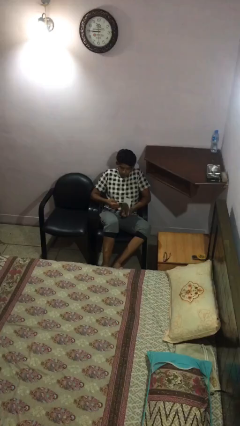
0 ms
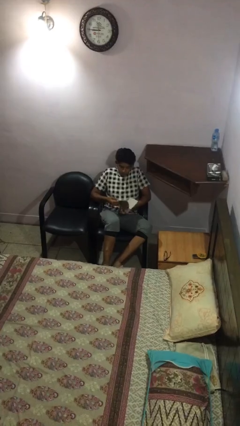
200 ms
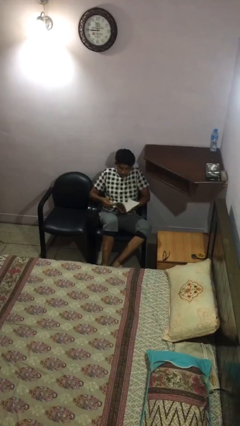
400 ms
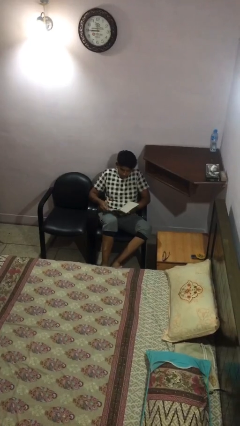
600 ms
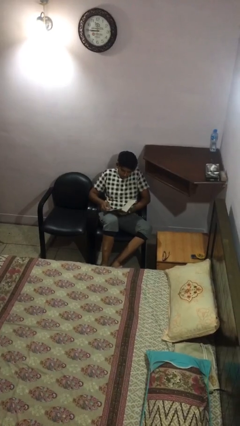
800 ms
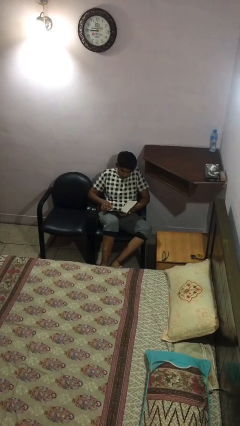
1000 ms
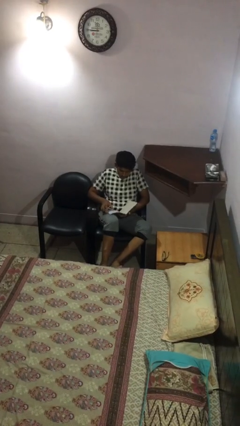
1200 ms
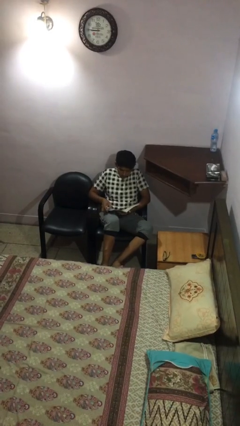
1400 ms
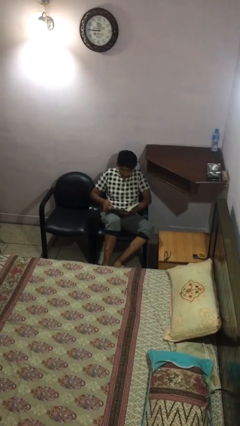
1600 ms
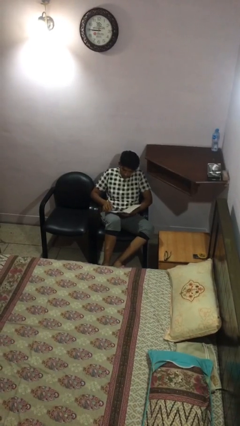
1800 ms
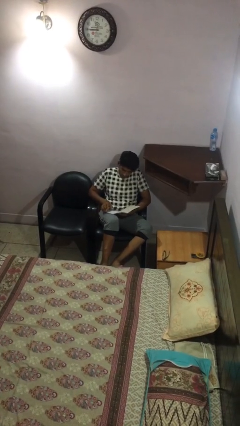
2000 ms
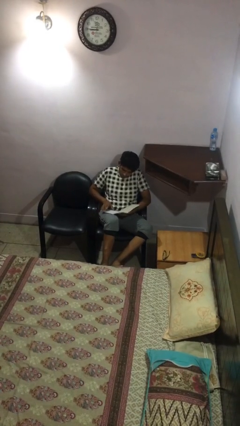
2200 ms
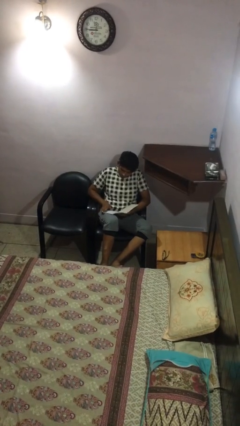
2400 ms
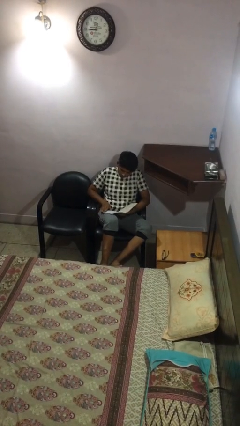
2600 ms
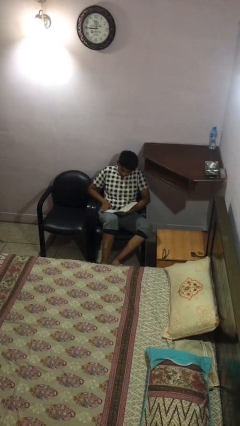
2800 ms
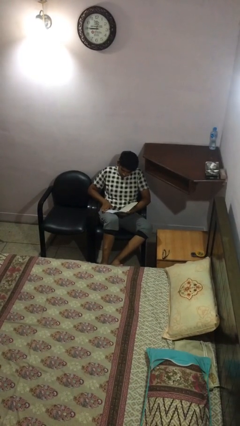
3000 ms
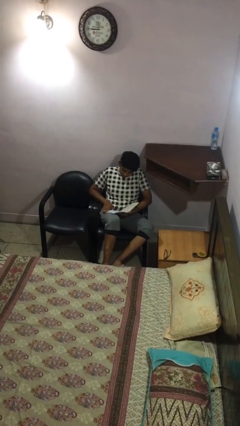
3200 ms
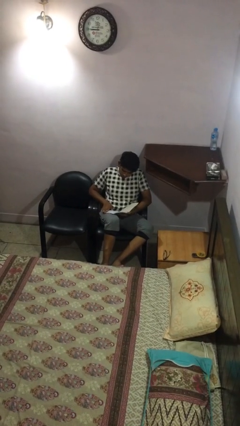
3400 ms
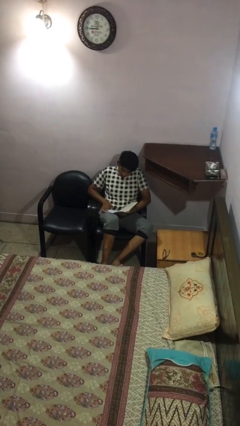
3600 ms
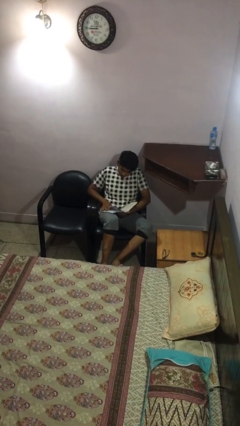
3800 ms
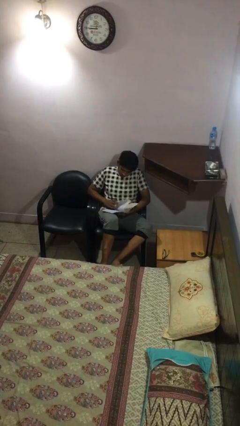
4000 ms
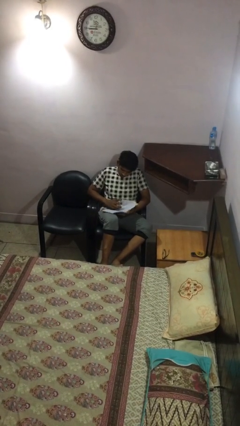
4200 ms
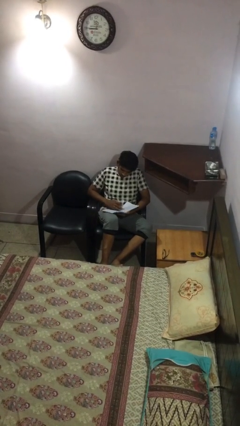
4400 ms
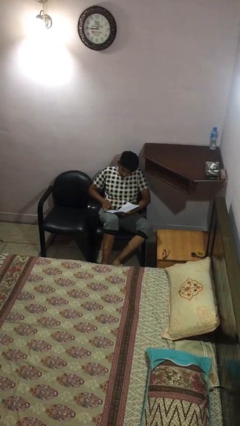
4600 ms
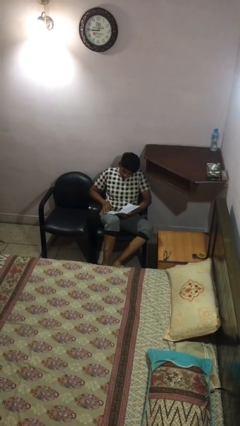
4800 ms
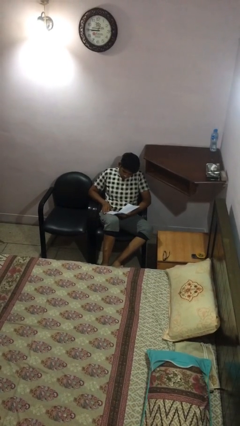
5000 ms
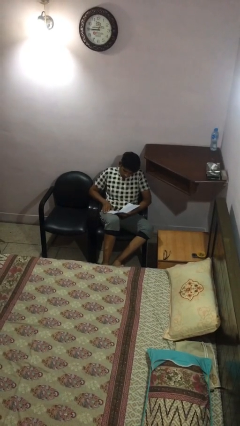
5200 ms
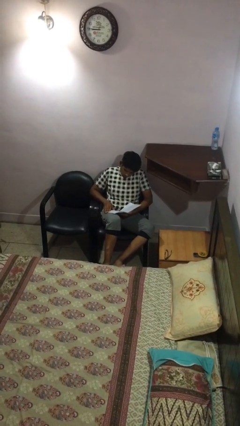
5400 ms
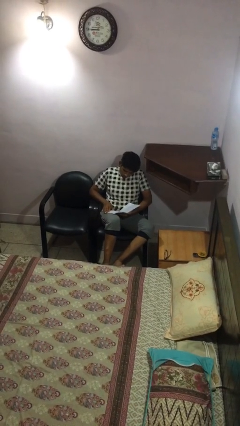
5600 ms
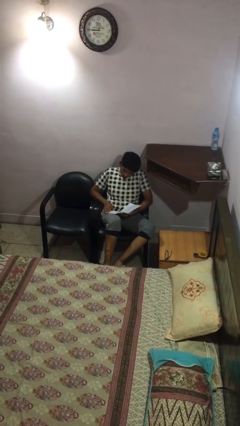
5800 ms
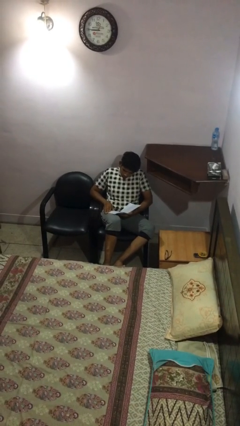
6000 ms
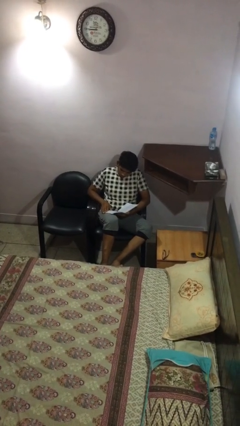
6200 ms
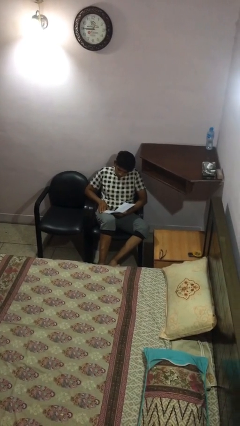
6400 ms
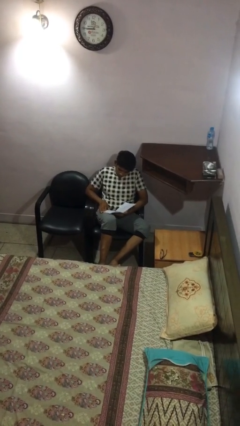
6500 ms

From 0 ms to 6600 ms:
person reads document

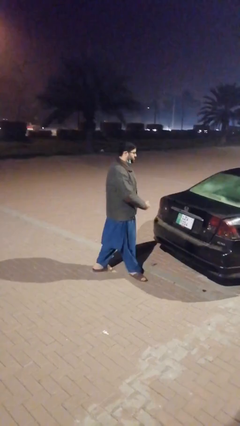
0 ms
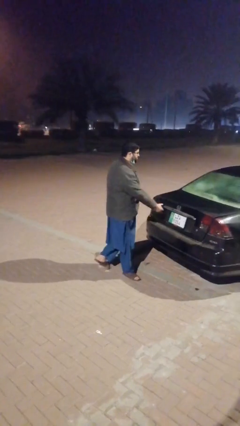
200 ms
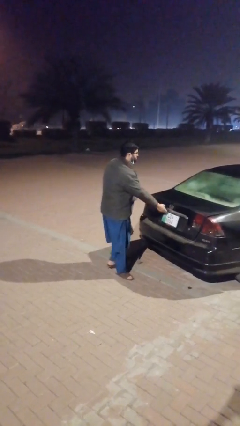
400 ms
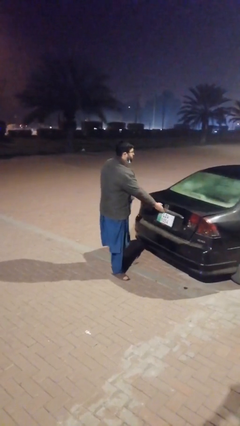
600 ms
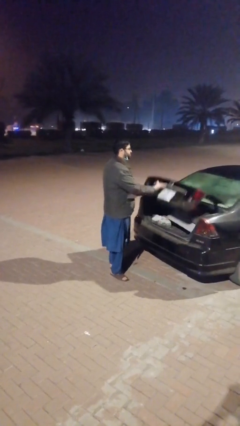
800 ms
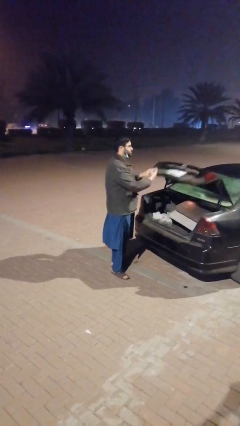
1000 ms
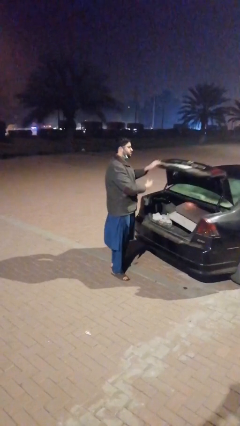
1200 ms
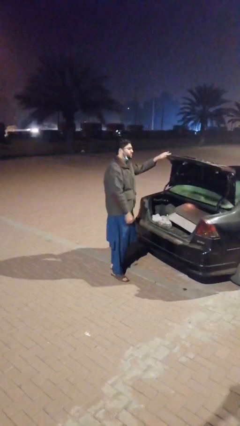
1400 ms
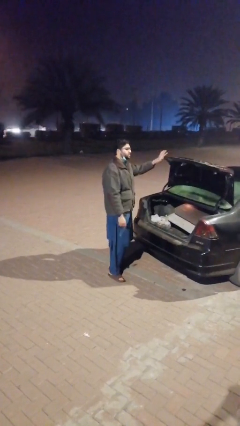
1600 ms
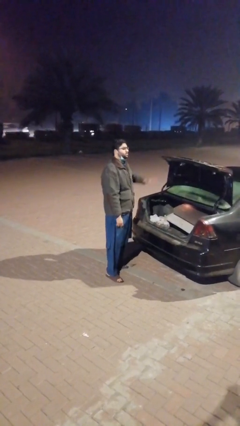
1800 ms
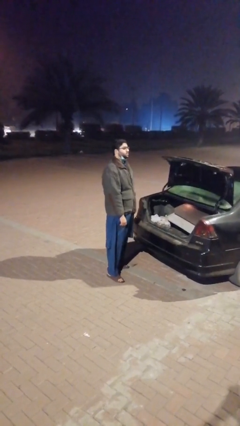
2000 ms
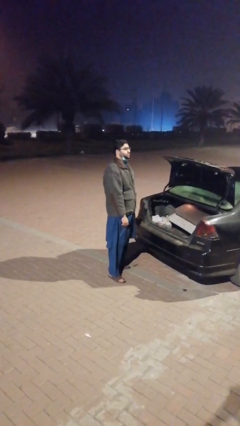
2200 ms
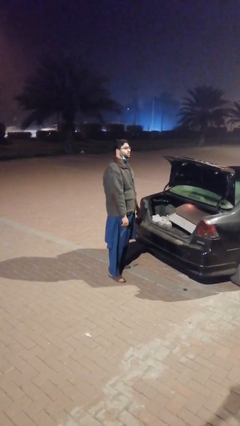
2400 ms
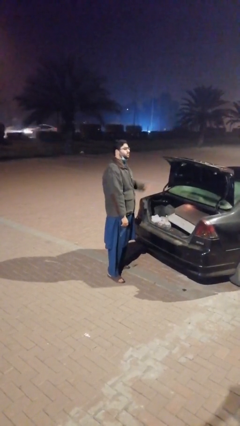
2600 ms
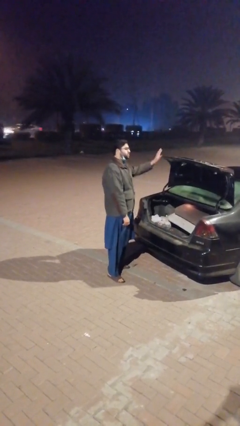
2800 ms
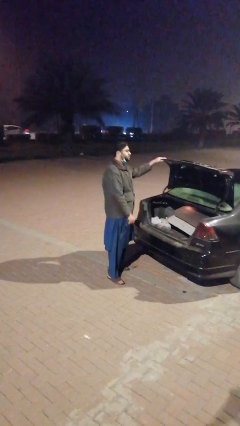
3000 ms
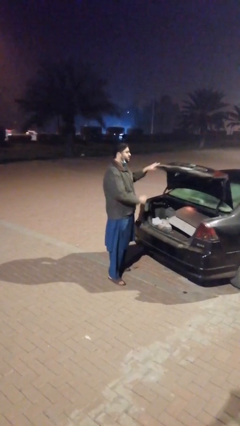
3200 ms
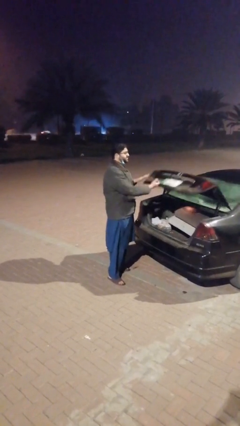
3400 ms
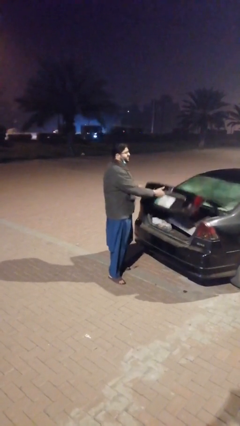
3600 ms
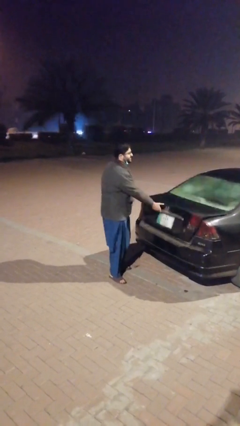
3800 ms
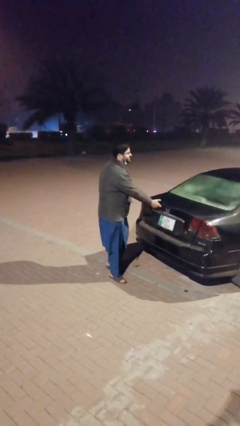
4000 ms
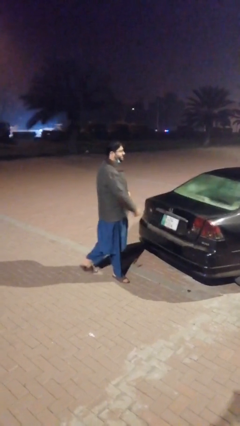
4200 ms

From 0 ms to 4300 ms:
person opens car trunk

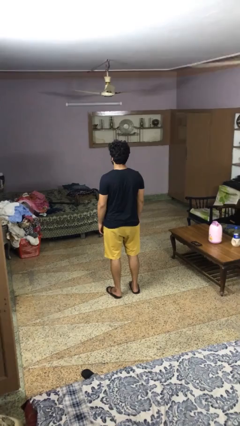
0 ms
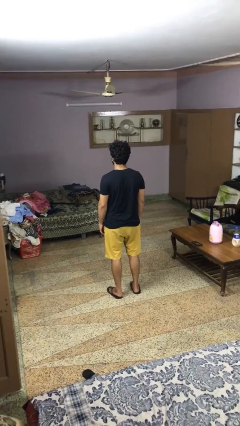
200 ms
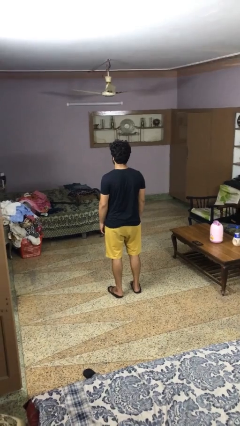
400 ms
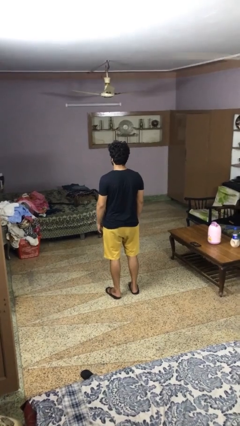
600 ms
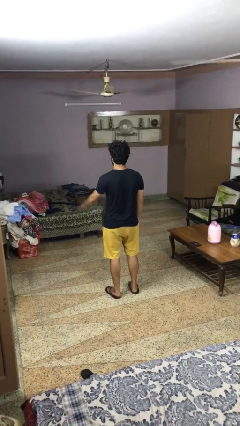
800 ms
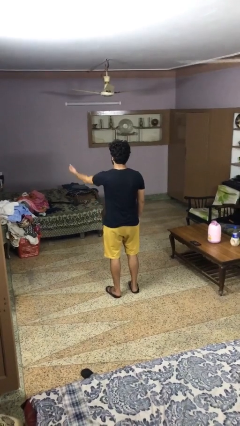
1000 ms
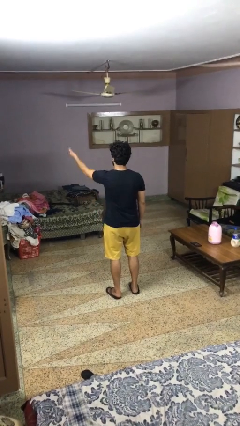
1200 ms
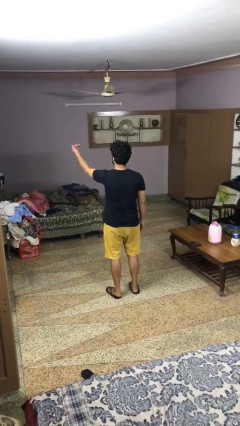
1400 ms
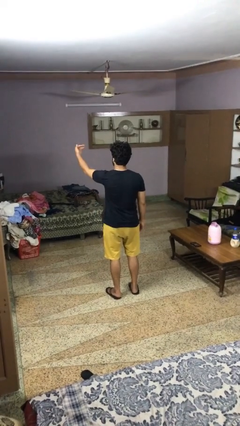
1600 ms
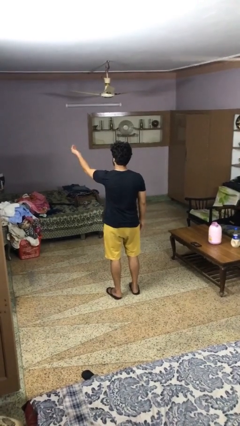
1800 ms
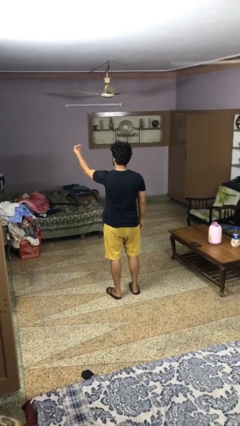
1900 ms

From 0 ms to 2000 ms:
person gestures come here

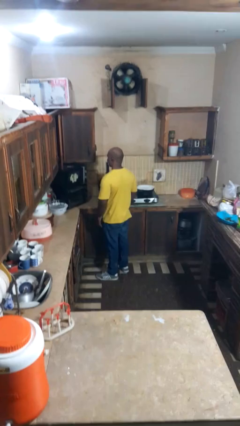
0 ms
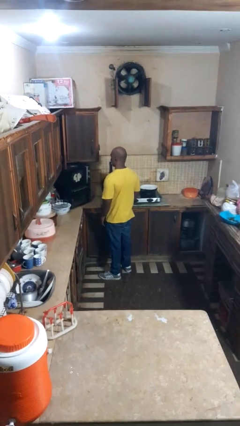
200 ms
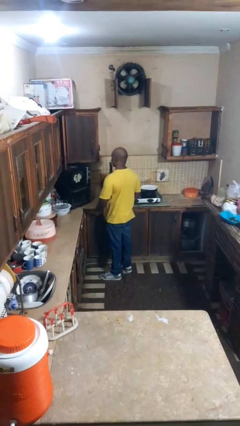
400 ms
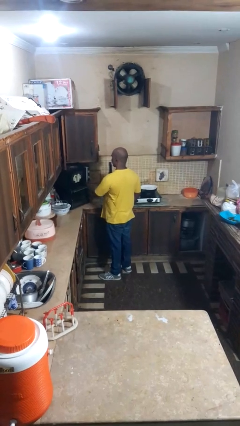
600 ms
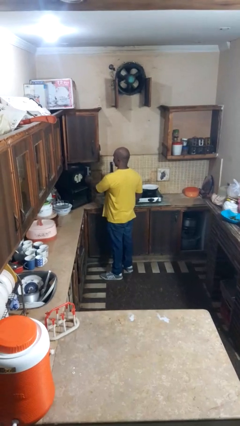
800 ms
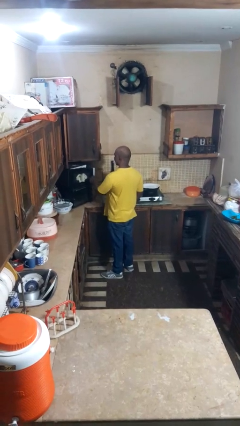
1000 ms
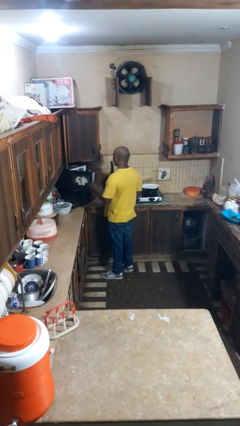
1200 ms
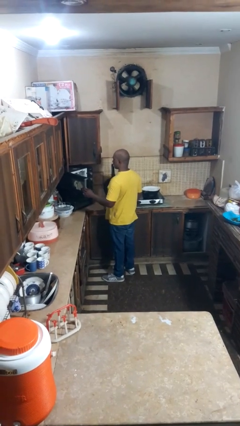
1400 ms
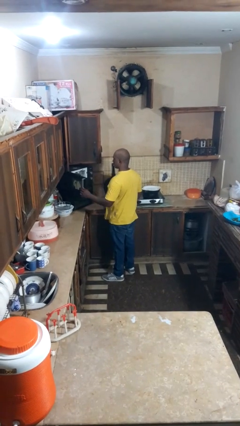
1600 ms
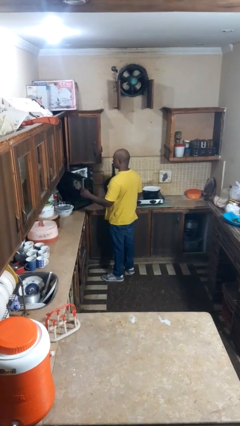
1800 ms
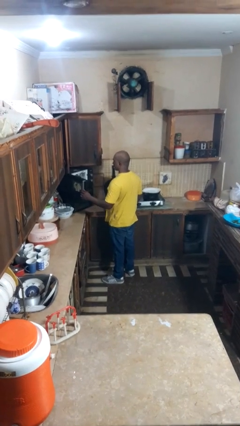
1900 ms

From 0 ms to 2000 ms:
person opens microwave

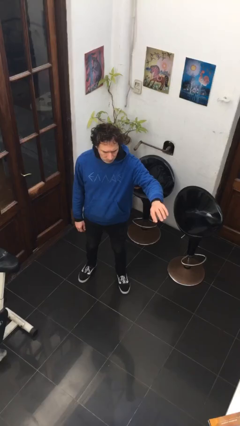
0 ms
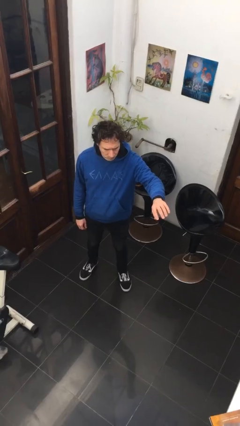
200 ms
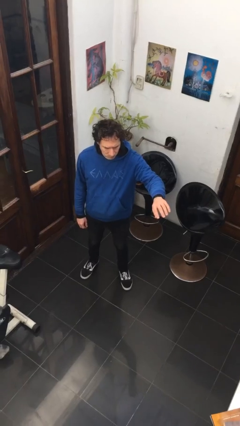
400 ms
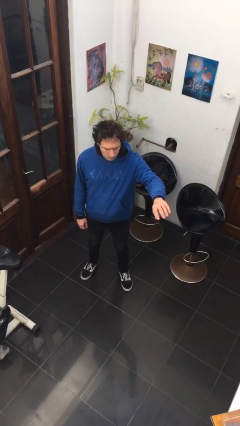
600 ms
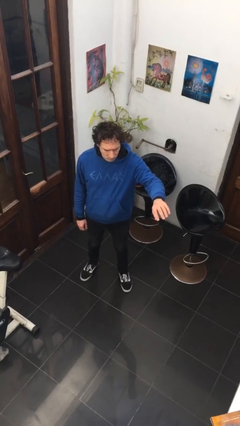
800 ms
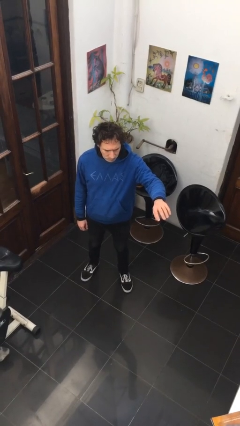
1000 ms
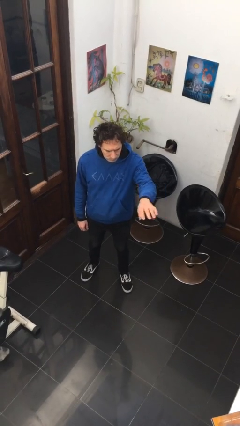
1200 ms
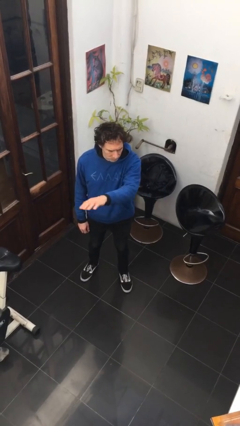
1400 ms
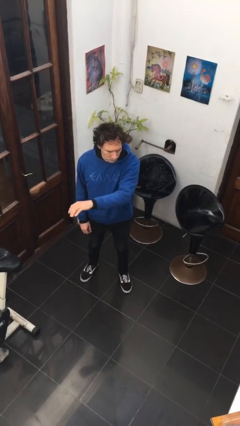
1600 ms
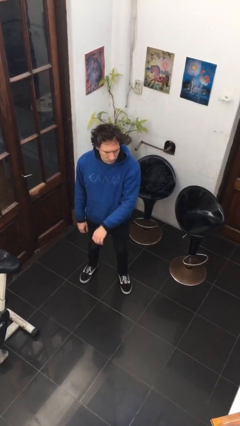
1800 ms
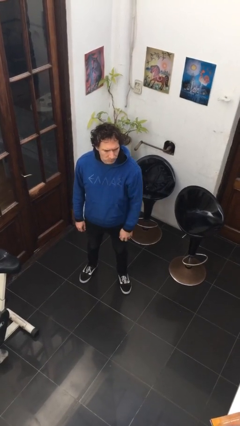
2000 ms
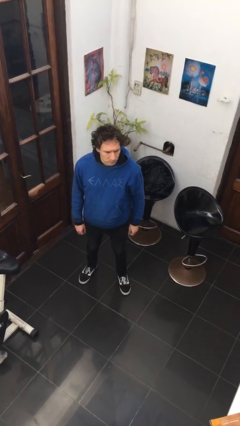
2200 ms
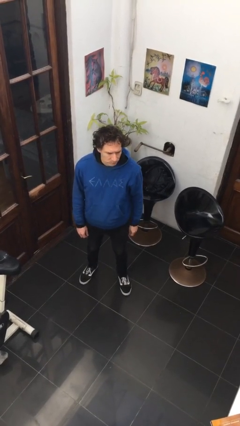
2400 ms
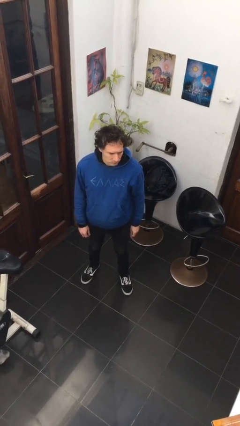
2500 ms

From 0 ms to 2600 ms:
person gestures swipe right

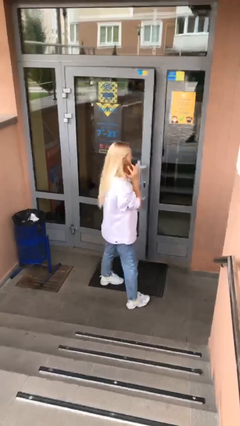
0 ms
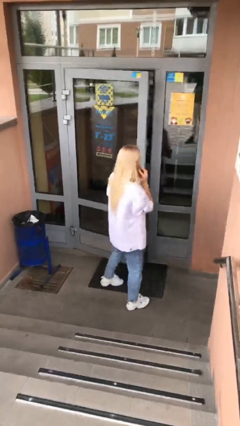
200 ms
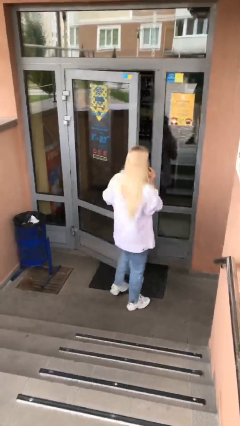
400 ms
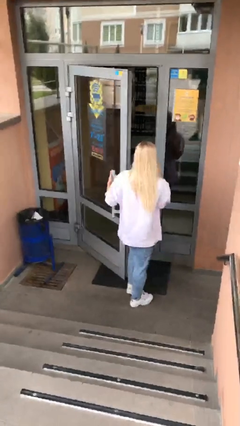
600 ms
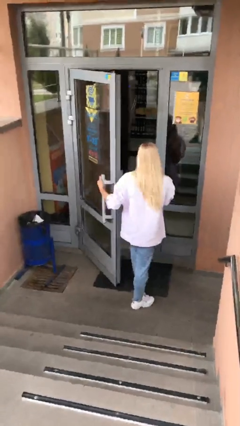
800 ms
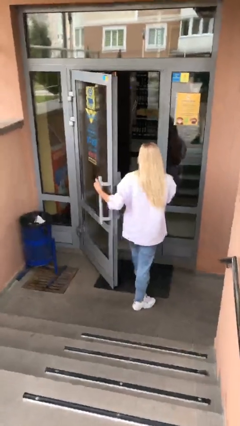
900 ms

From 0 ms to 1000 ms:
person opens facility door
